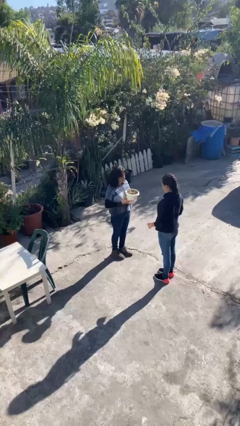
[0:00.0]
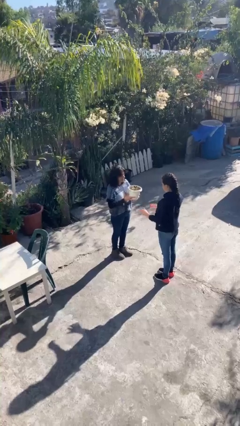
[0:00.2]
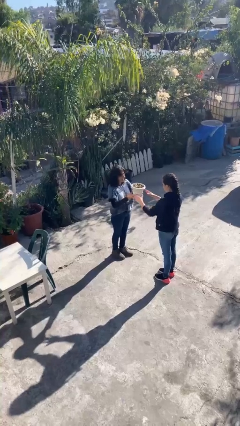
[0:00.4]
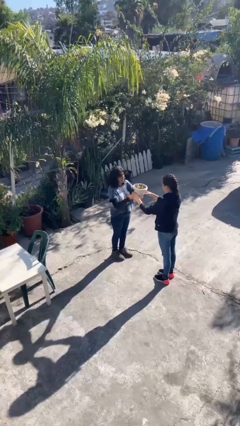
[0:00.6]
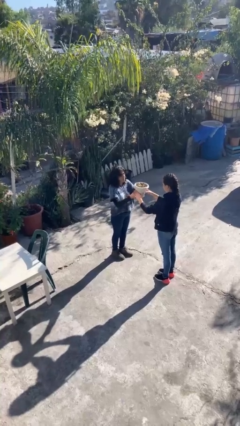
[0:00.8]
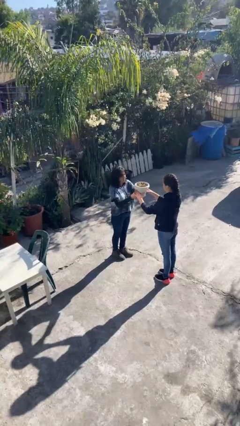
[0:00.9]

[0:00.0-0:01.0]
person transfers object to person

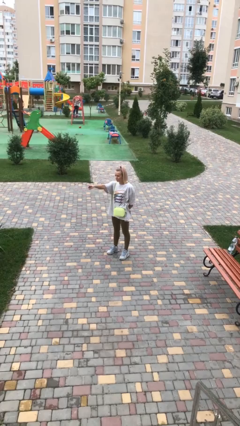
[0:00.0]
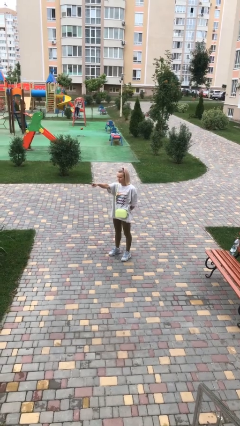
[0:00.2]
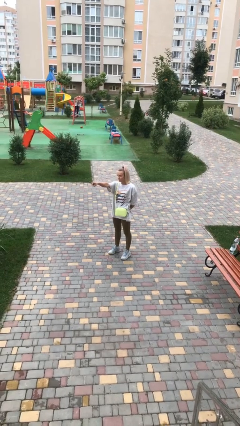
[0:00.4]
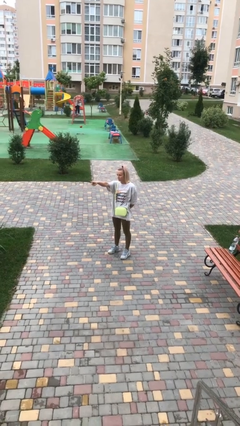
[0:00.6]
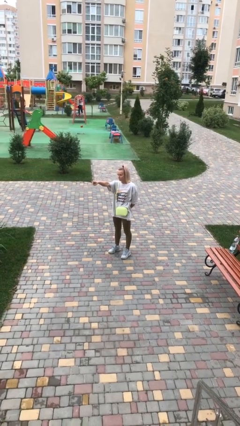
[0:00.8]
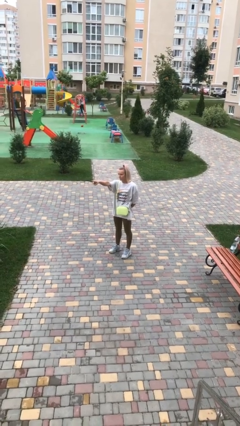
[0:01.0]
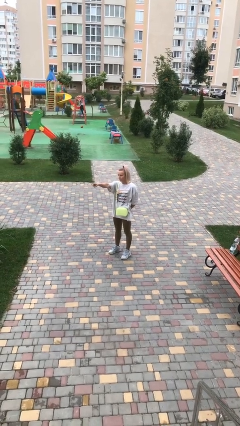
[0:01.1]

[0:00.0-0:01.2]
person points at person

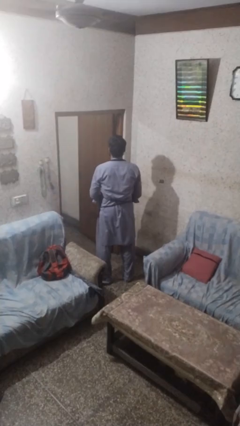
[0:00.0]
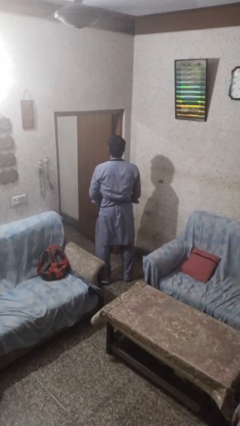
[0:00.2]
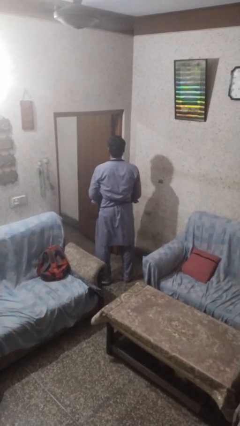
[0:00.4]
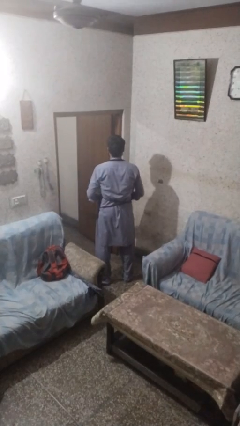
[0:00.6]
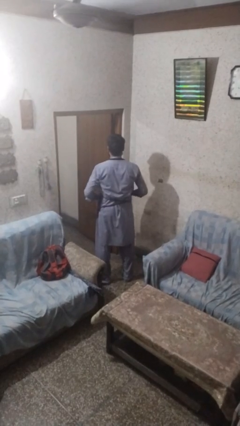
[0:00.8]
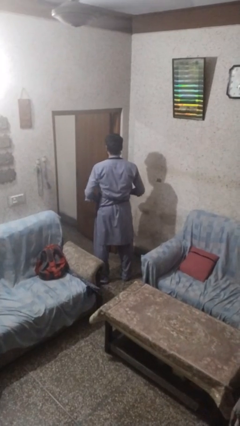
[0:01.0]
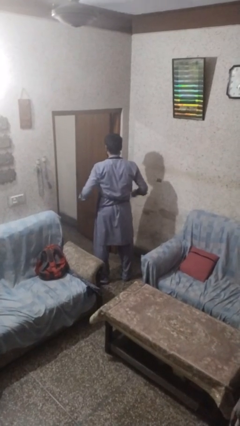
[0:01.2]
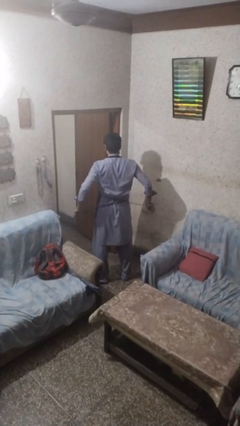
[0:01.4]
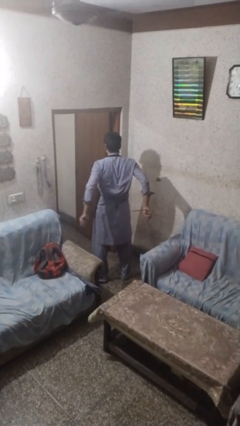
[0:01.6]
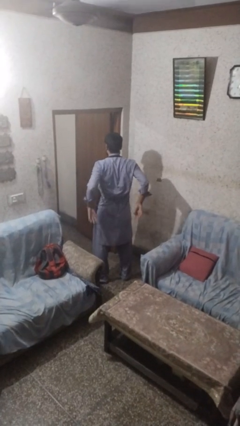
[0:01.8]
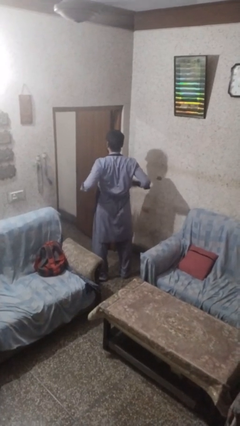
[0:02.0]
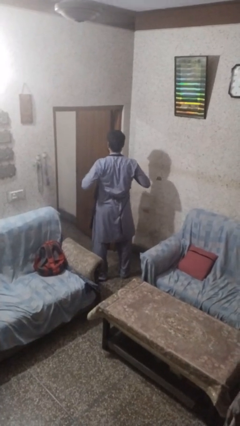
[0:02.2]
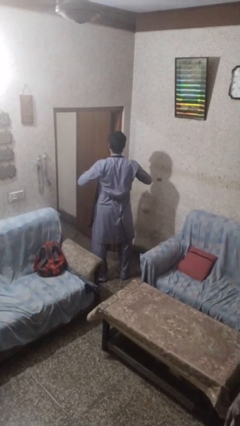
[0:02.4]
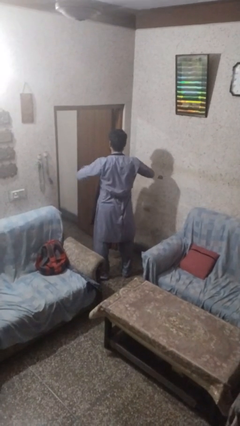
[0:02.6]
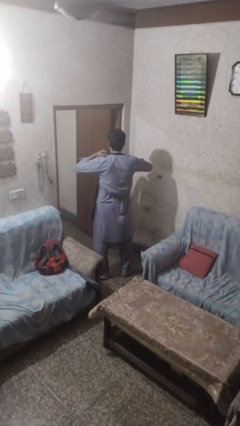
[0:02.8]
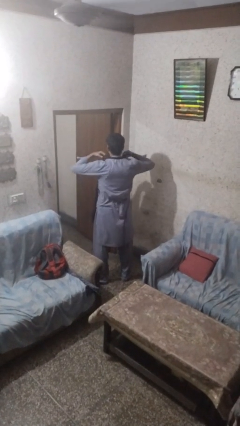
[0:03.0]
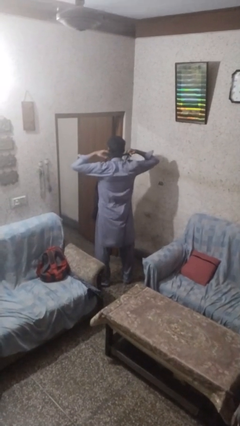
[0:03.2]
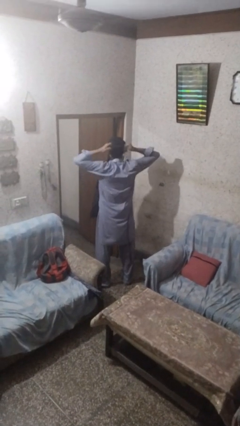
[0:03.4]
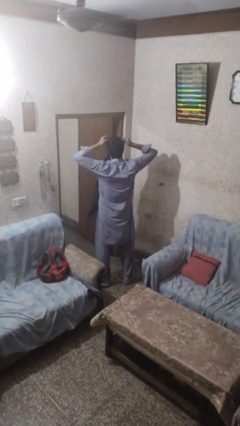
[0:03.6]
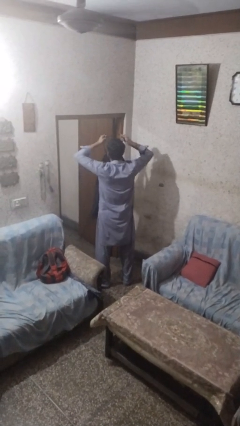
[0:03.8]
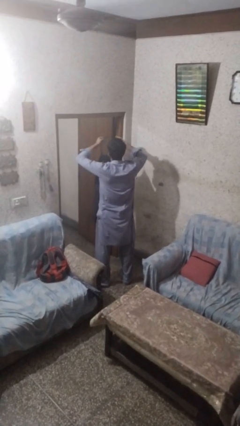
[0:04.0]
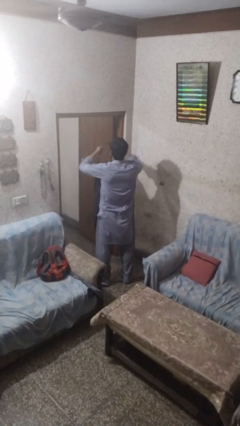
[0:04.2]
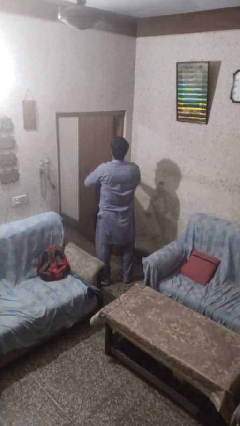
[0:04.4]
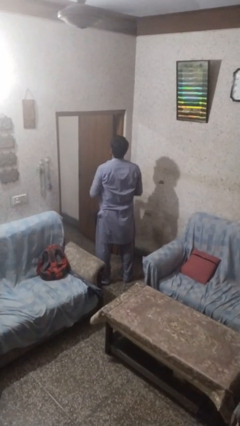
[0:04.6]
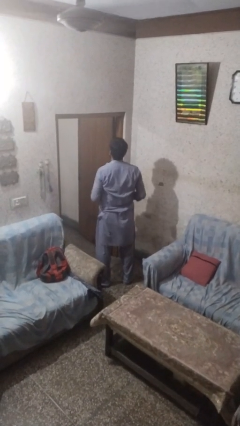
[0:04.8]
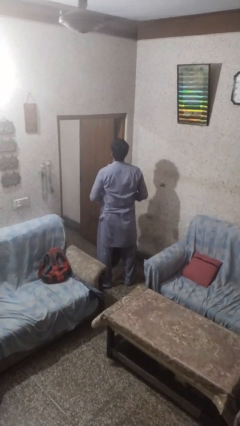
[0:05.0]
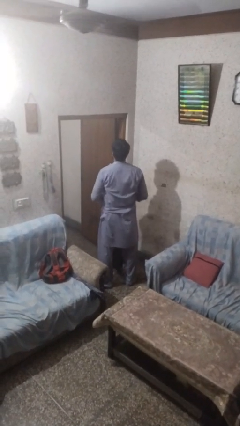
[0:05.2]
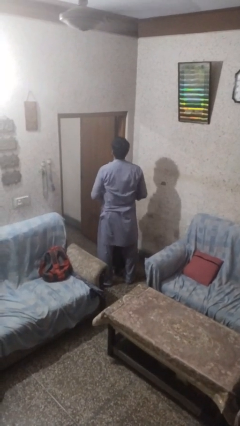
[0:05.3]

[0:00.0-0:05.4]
person takes off apron

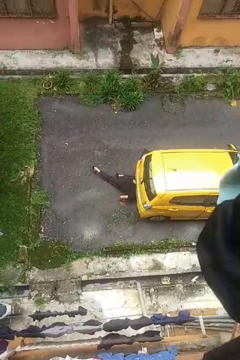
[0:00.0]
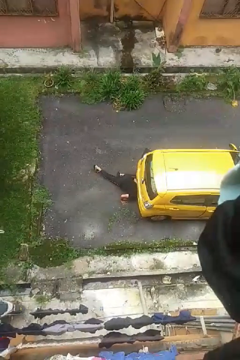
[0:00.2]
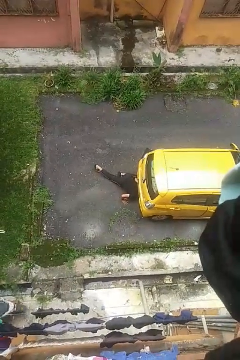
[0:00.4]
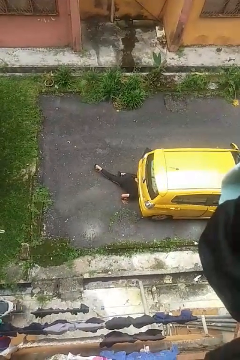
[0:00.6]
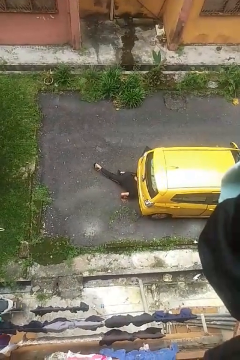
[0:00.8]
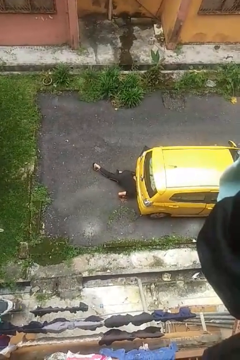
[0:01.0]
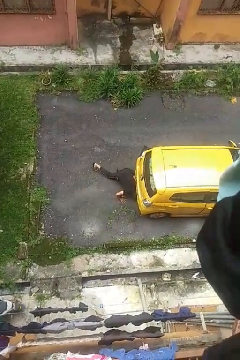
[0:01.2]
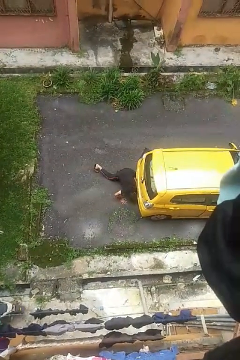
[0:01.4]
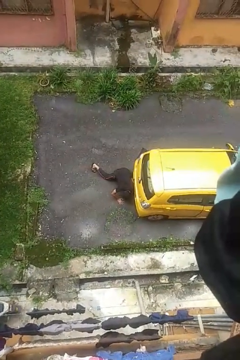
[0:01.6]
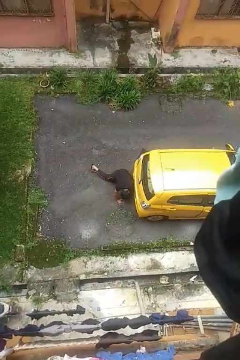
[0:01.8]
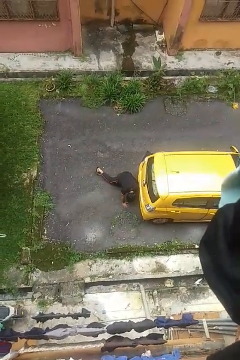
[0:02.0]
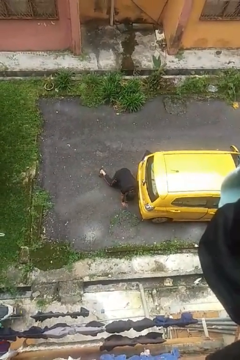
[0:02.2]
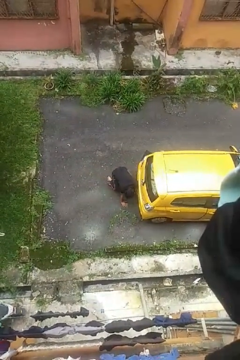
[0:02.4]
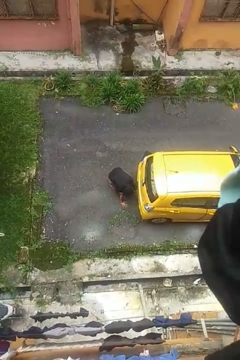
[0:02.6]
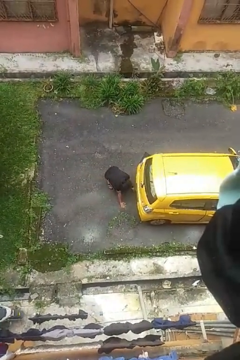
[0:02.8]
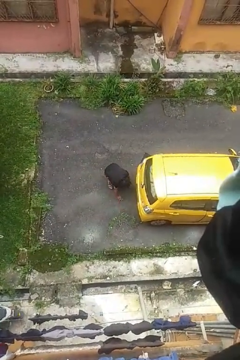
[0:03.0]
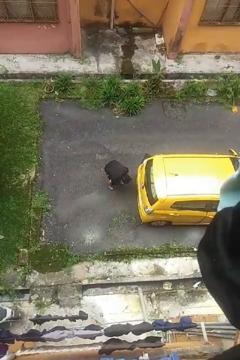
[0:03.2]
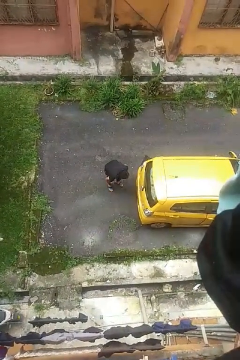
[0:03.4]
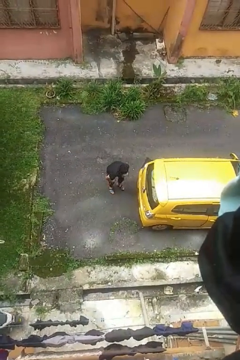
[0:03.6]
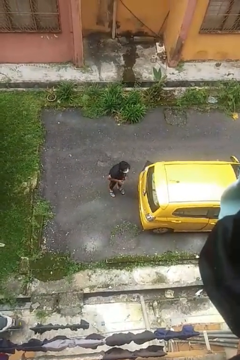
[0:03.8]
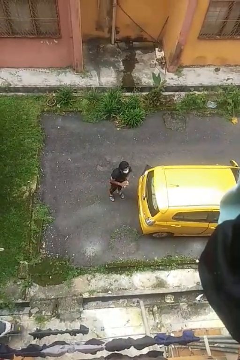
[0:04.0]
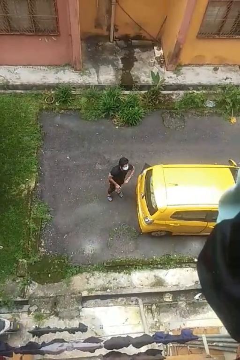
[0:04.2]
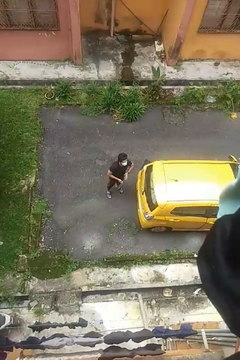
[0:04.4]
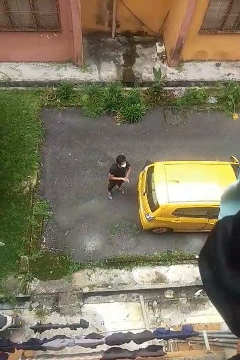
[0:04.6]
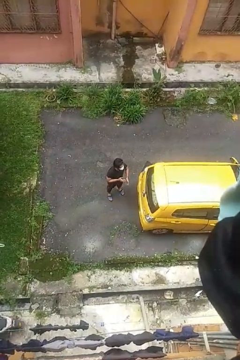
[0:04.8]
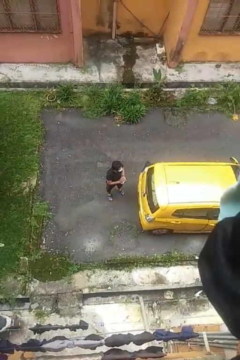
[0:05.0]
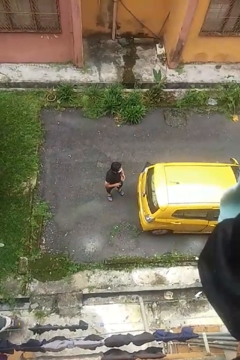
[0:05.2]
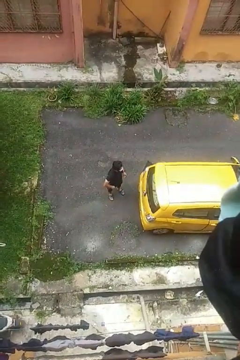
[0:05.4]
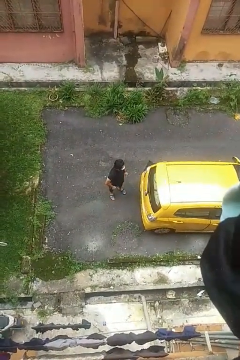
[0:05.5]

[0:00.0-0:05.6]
person crawls out from under vehicle

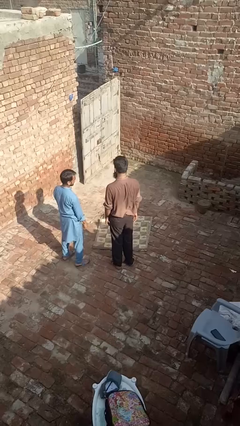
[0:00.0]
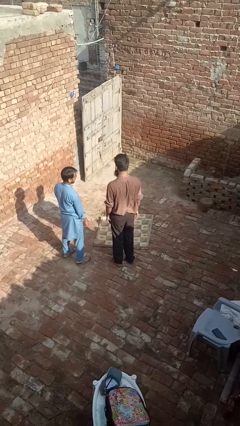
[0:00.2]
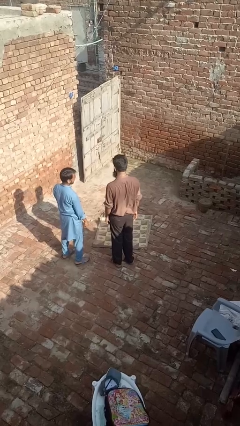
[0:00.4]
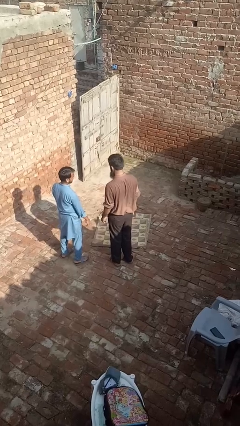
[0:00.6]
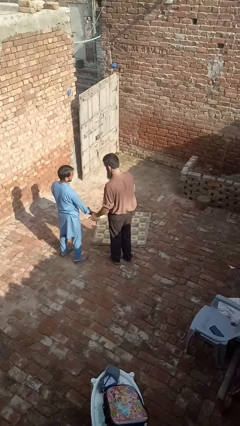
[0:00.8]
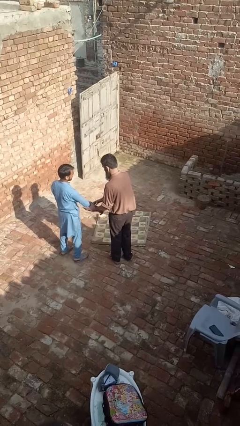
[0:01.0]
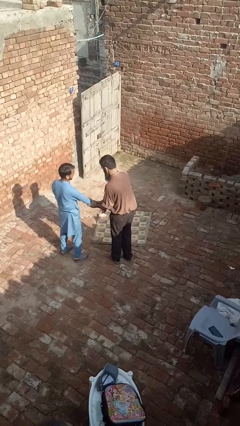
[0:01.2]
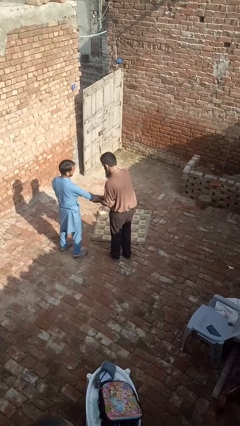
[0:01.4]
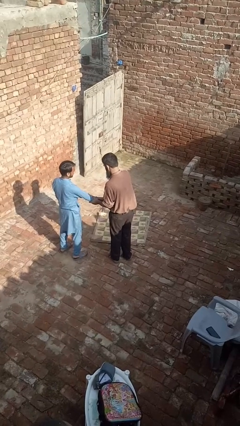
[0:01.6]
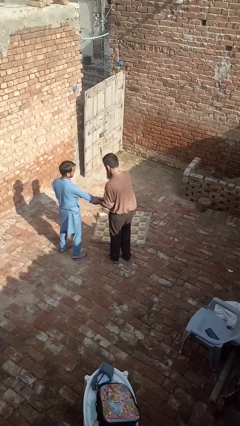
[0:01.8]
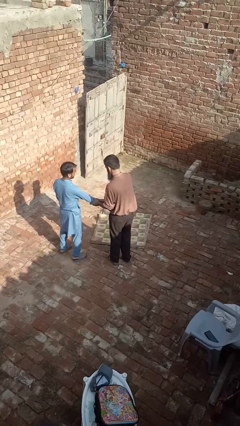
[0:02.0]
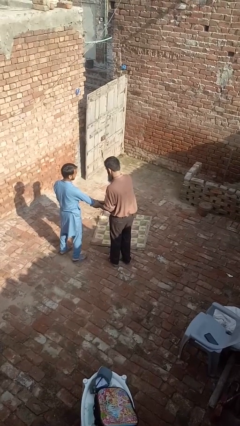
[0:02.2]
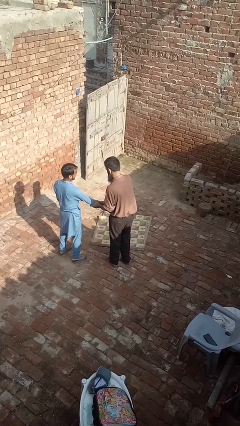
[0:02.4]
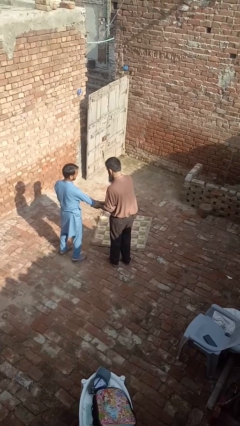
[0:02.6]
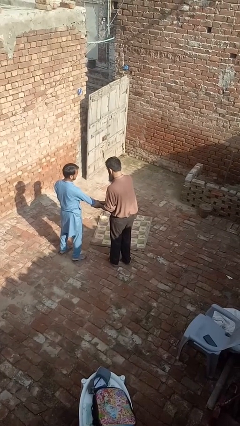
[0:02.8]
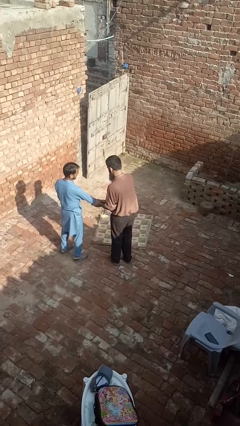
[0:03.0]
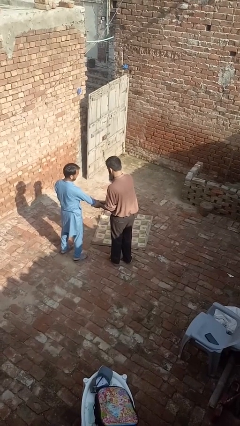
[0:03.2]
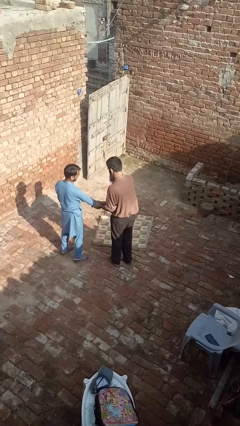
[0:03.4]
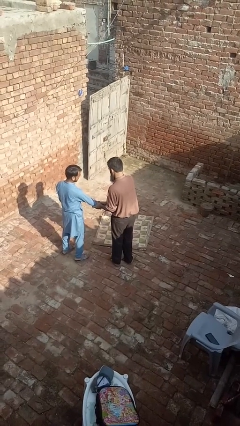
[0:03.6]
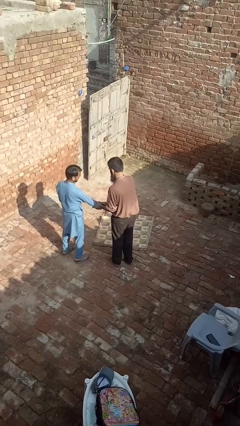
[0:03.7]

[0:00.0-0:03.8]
person grabs person by forearm

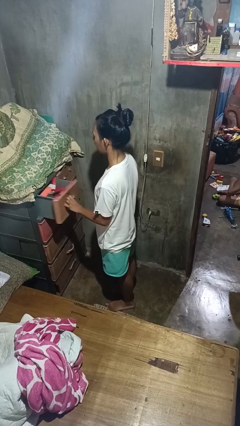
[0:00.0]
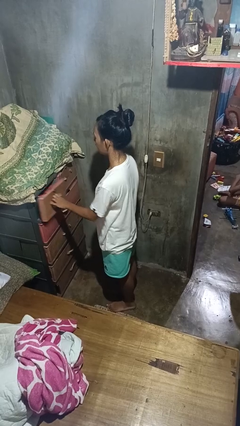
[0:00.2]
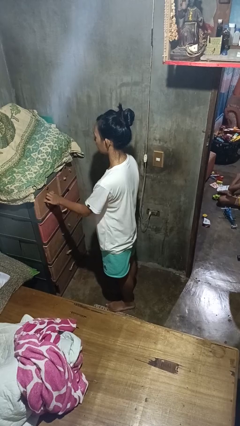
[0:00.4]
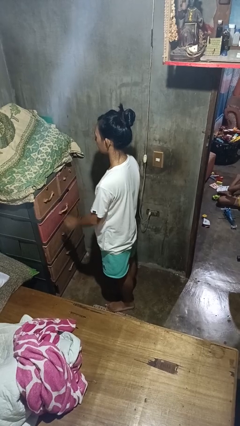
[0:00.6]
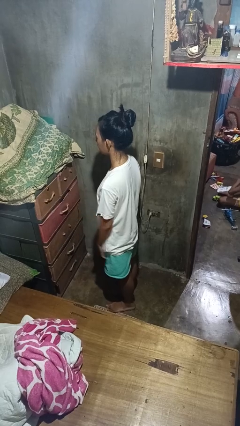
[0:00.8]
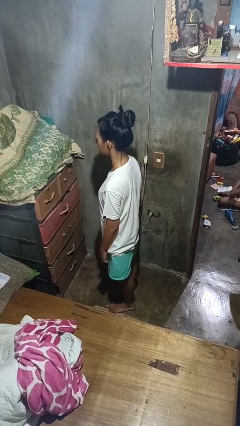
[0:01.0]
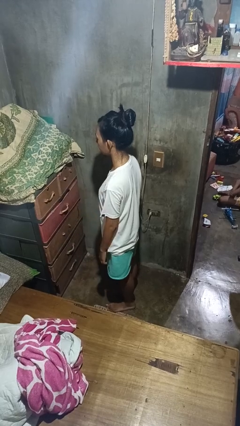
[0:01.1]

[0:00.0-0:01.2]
person closes dresser drawer

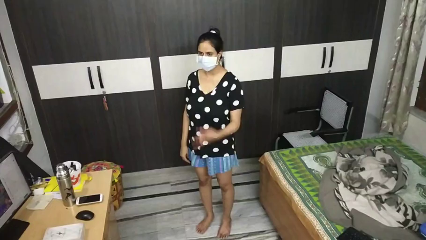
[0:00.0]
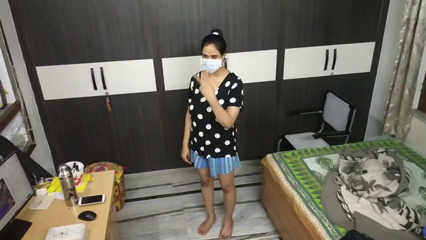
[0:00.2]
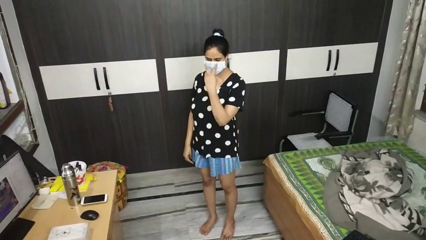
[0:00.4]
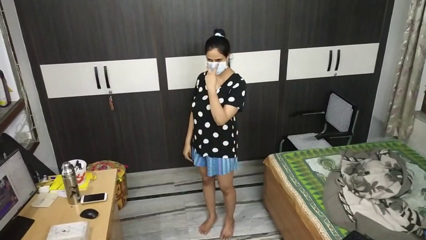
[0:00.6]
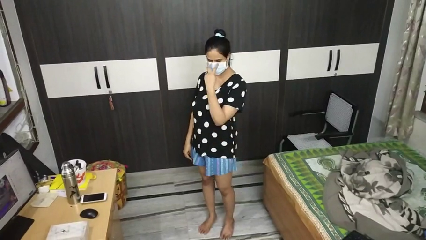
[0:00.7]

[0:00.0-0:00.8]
person gestures watch closely
